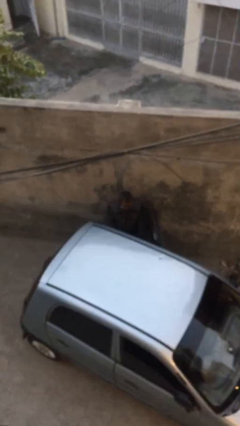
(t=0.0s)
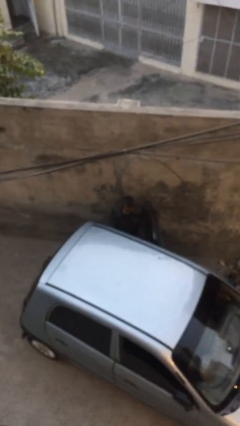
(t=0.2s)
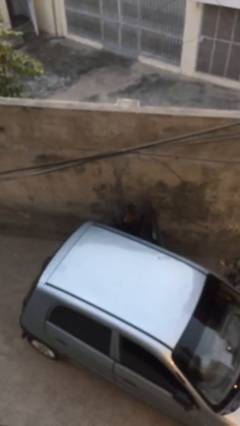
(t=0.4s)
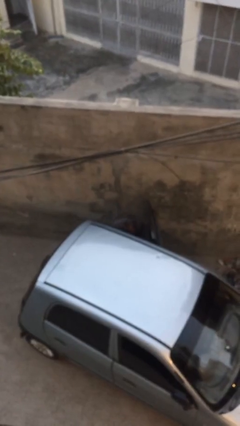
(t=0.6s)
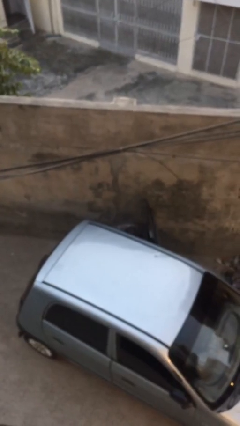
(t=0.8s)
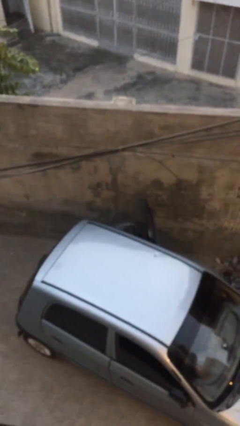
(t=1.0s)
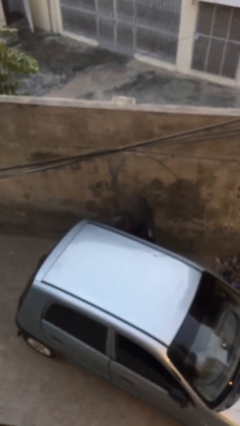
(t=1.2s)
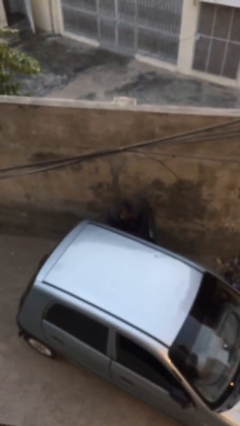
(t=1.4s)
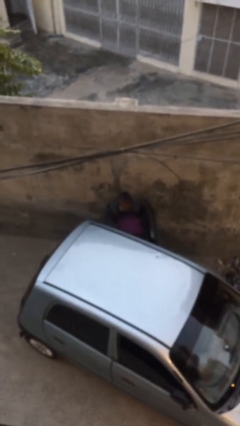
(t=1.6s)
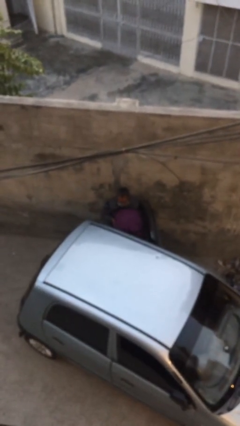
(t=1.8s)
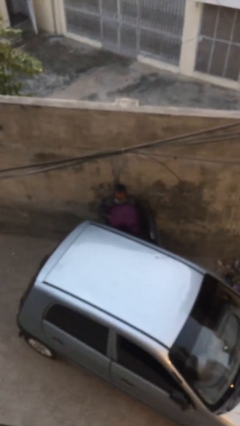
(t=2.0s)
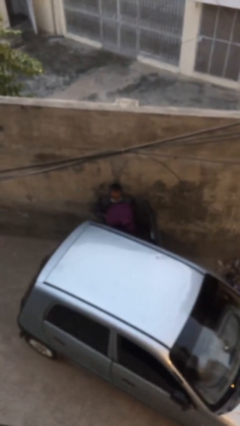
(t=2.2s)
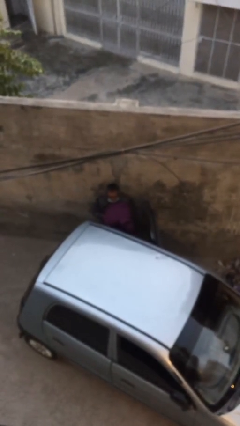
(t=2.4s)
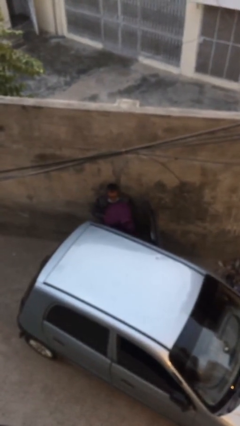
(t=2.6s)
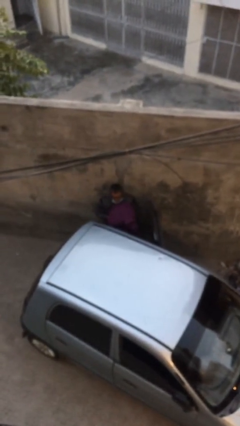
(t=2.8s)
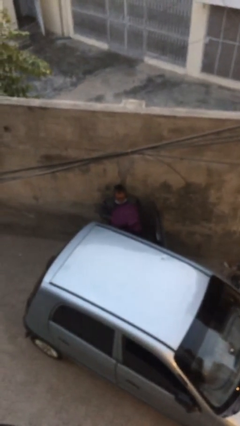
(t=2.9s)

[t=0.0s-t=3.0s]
person unloads car

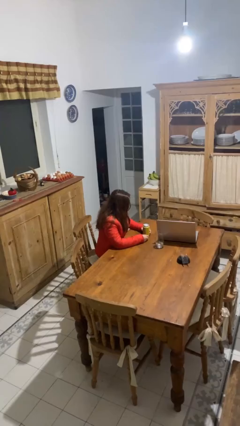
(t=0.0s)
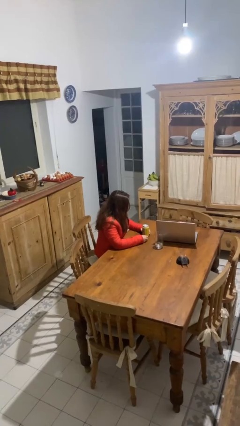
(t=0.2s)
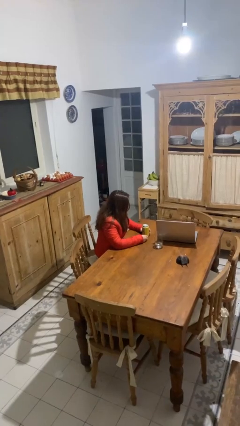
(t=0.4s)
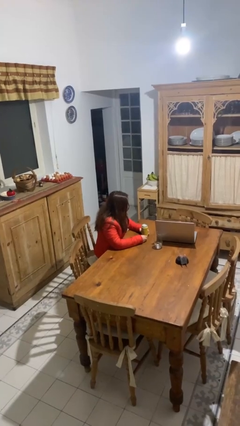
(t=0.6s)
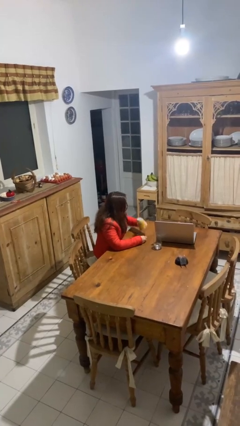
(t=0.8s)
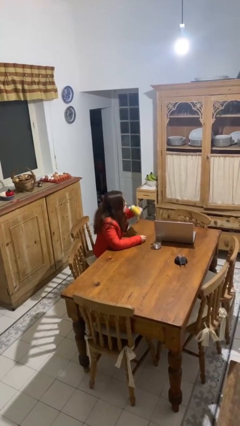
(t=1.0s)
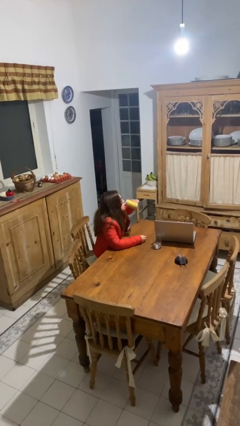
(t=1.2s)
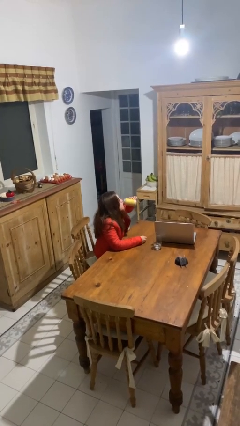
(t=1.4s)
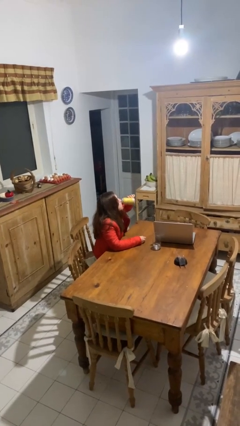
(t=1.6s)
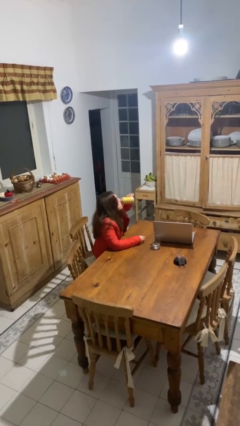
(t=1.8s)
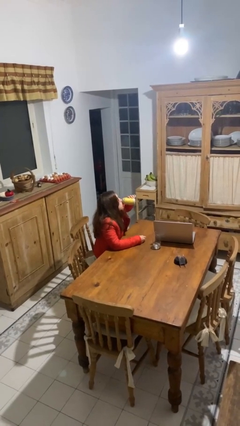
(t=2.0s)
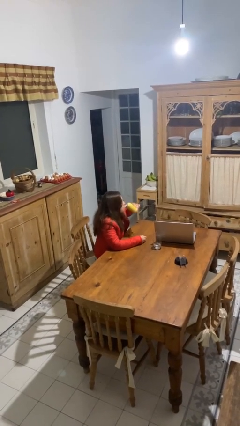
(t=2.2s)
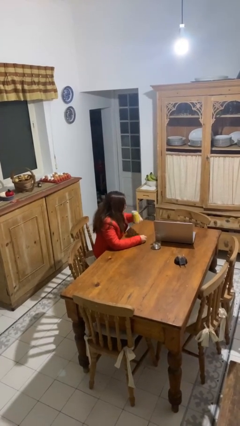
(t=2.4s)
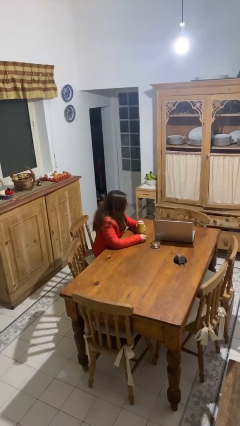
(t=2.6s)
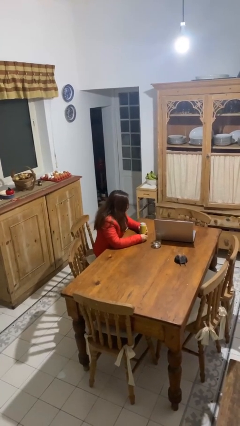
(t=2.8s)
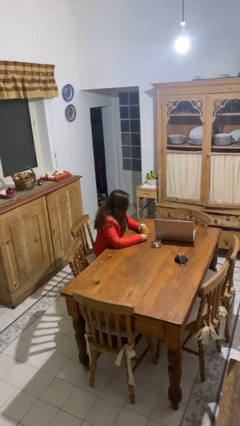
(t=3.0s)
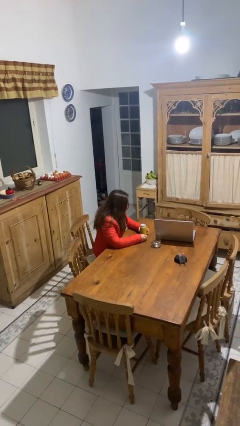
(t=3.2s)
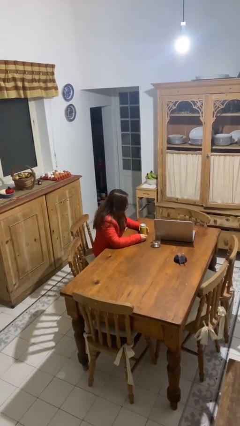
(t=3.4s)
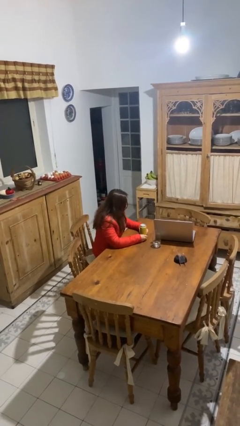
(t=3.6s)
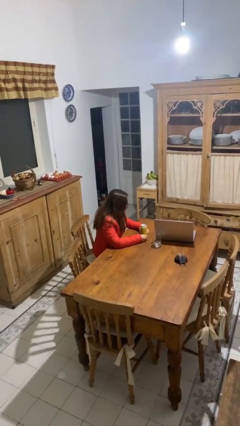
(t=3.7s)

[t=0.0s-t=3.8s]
person drinks from beverage can

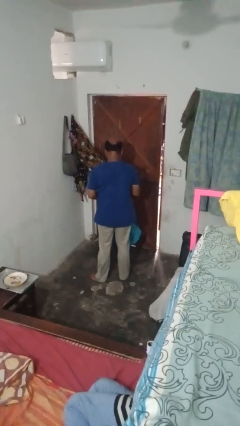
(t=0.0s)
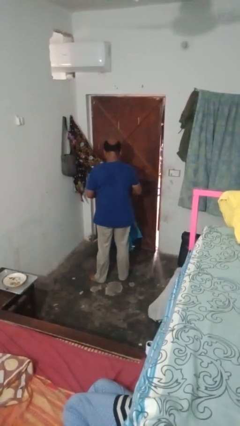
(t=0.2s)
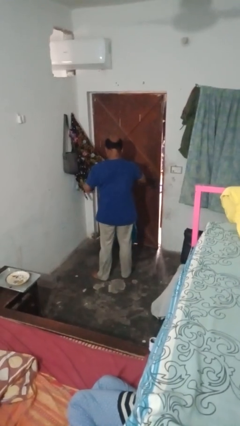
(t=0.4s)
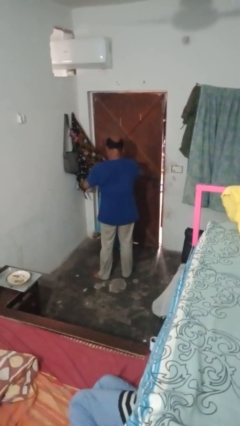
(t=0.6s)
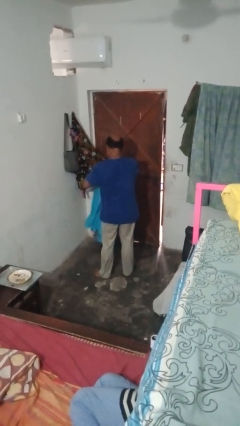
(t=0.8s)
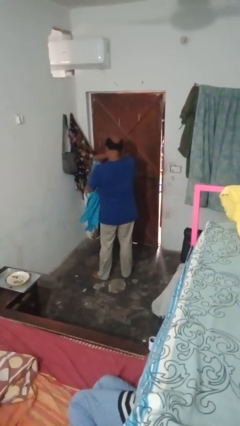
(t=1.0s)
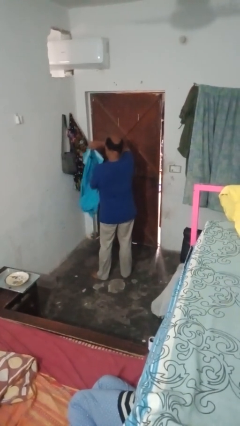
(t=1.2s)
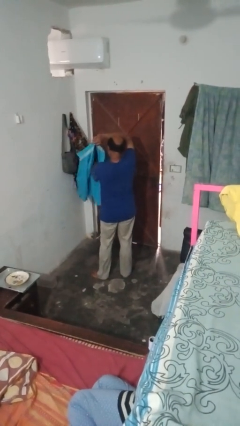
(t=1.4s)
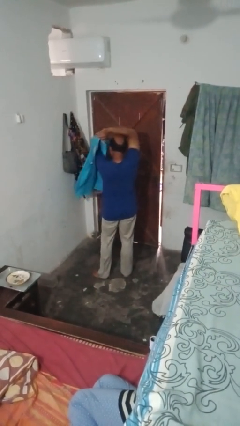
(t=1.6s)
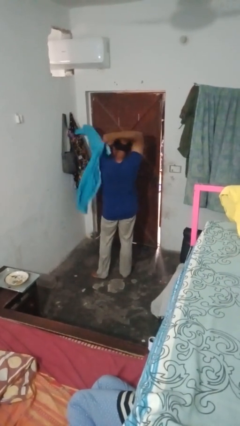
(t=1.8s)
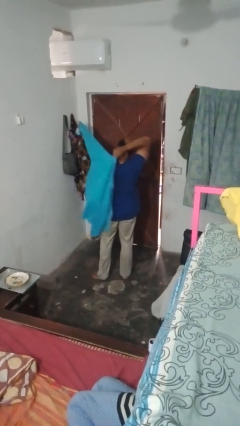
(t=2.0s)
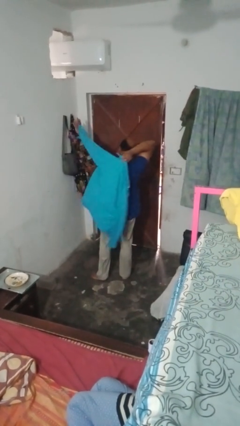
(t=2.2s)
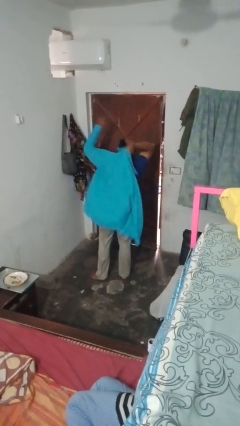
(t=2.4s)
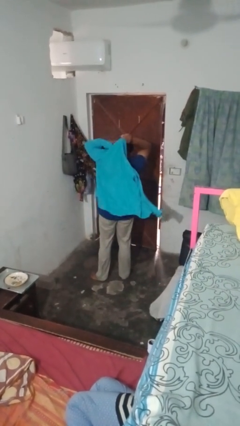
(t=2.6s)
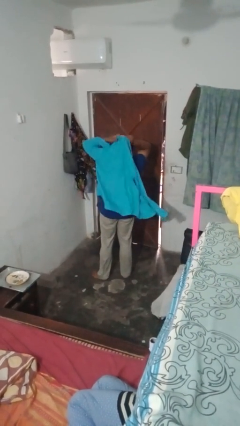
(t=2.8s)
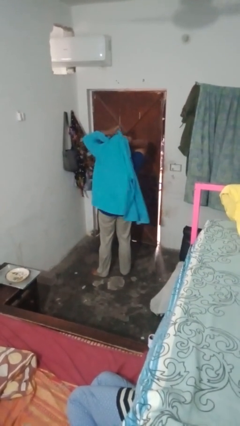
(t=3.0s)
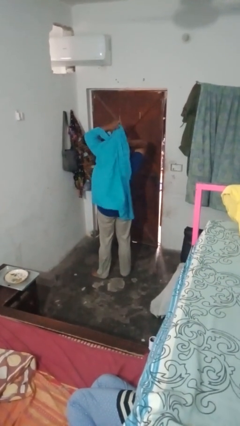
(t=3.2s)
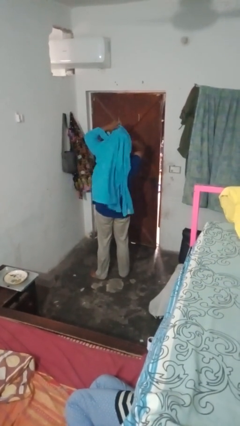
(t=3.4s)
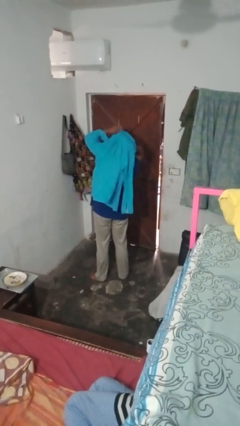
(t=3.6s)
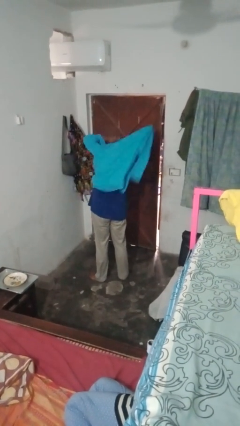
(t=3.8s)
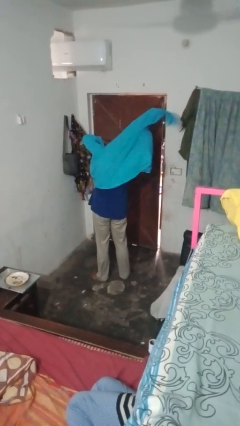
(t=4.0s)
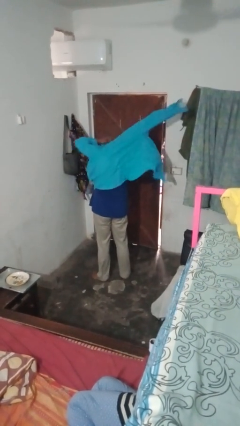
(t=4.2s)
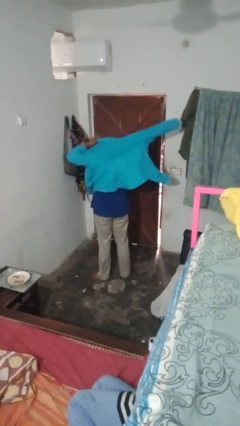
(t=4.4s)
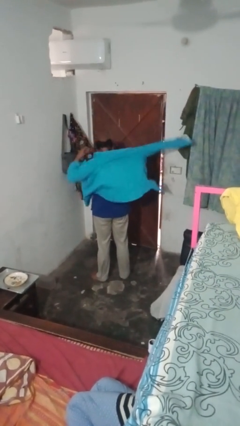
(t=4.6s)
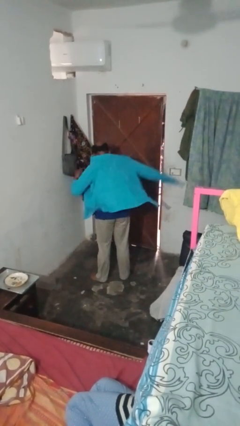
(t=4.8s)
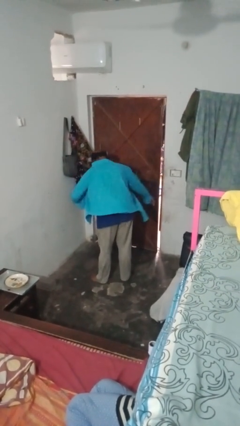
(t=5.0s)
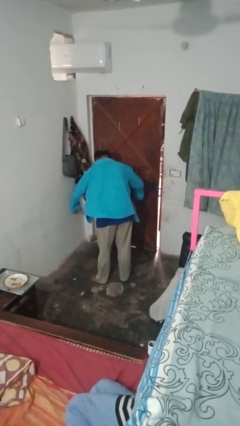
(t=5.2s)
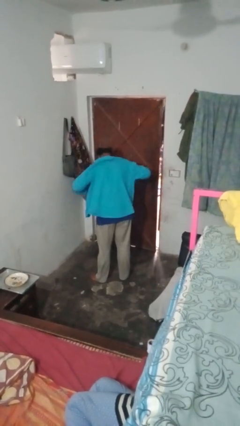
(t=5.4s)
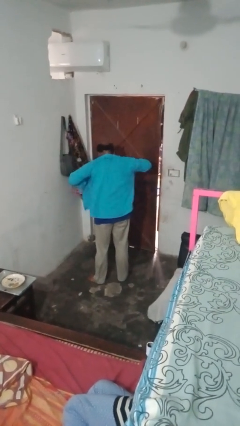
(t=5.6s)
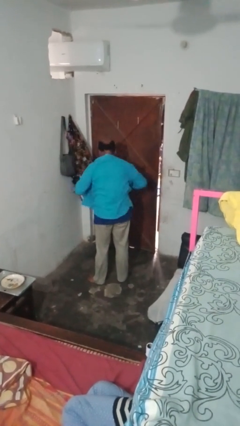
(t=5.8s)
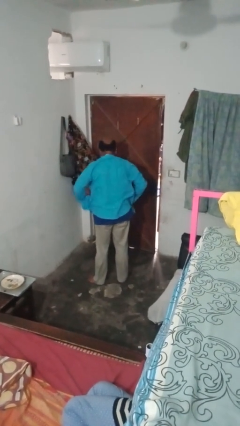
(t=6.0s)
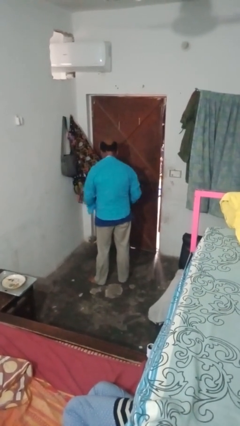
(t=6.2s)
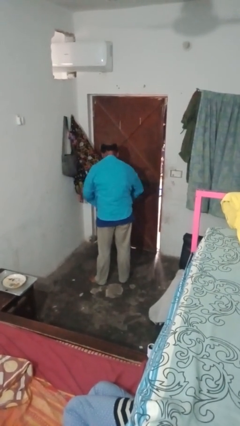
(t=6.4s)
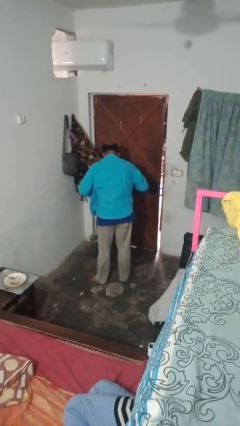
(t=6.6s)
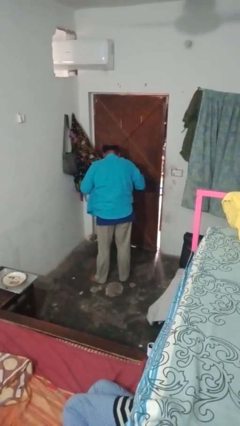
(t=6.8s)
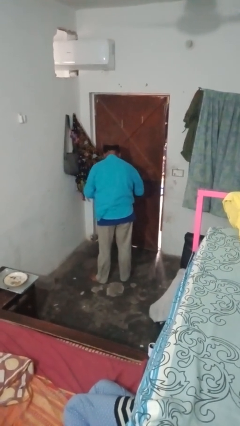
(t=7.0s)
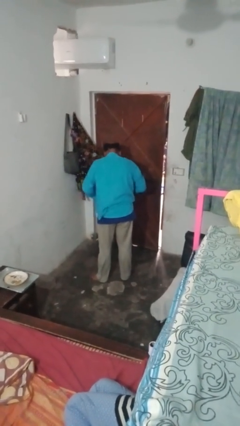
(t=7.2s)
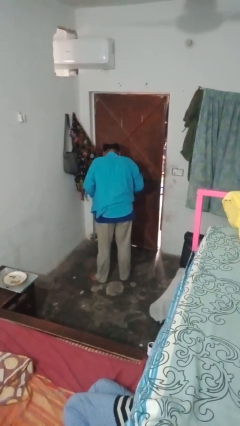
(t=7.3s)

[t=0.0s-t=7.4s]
person puts on shirt

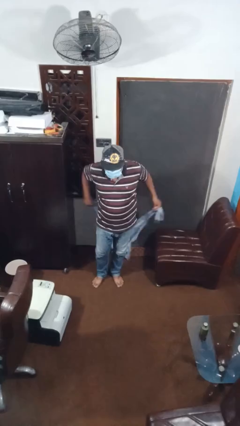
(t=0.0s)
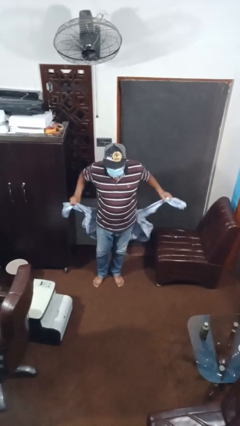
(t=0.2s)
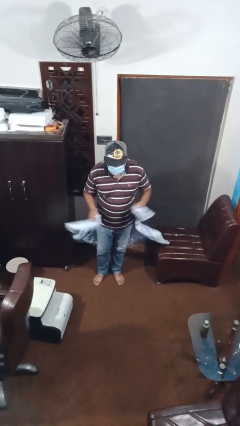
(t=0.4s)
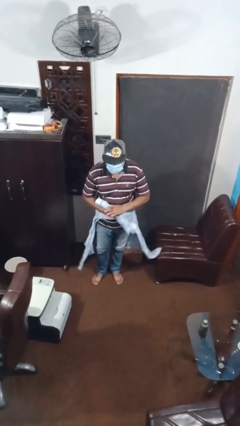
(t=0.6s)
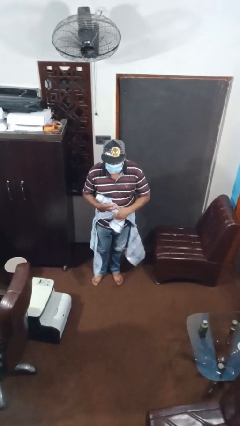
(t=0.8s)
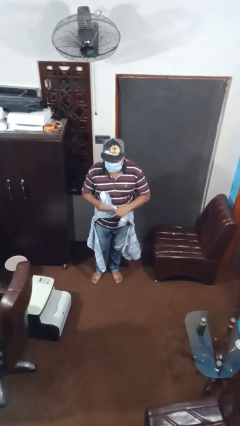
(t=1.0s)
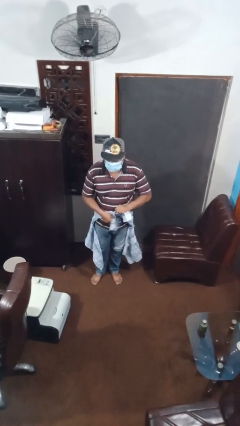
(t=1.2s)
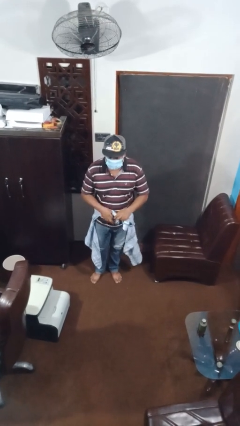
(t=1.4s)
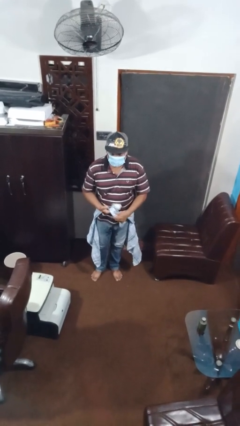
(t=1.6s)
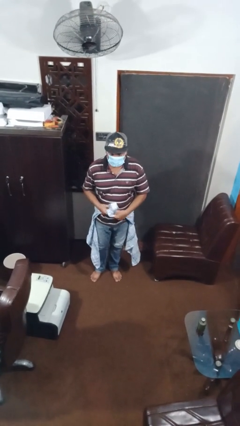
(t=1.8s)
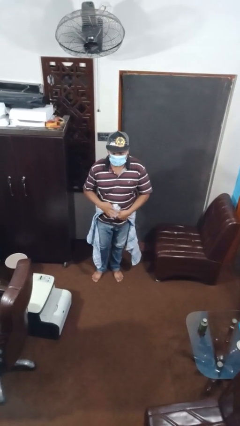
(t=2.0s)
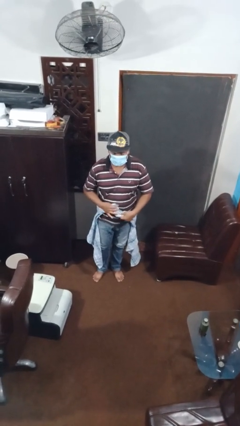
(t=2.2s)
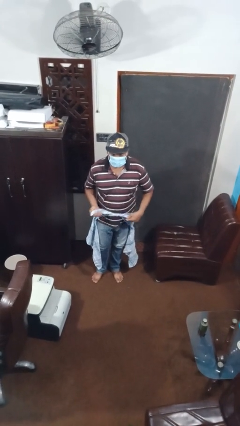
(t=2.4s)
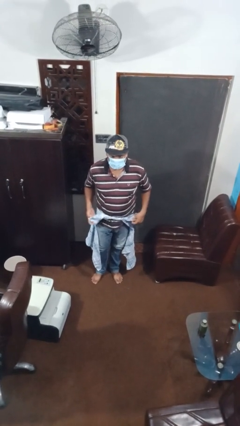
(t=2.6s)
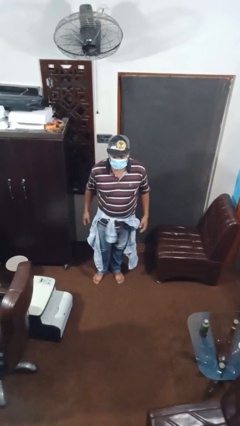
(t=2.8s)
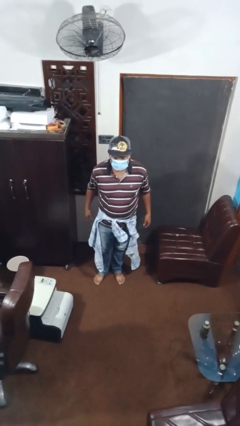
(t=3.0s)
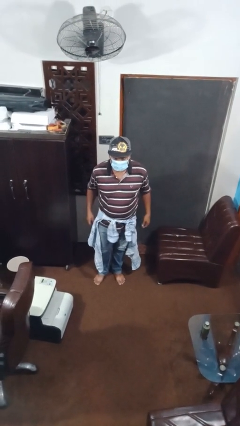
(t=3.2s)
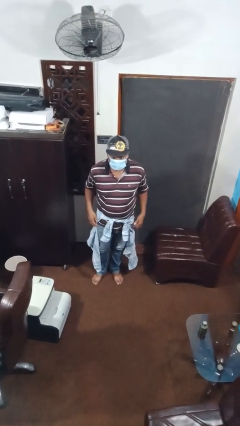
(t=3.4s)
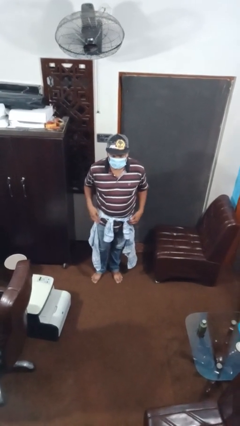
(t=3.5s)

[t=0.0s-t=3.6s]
person ties jacket around waist
